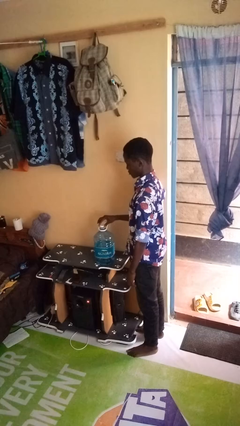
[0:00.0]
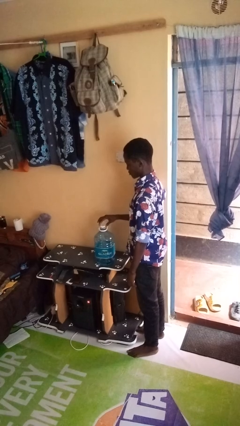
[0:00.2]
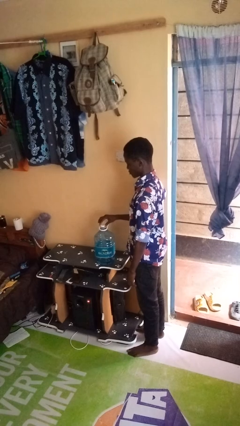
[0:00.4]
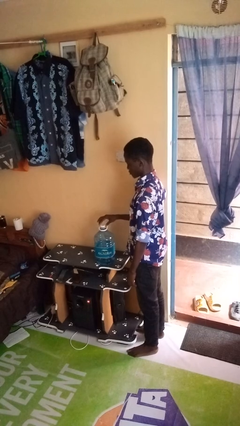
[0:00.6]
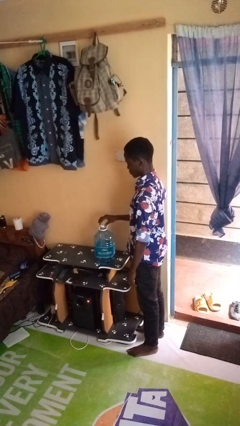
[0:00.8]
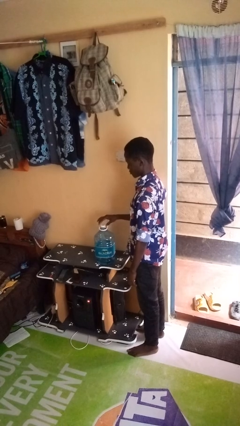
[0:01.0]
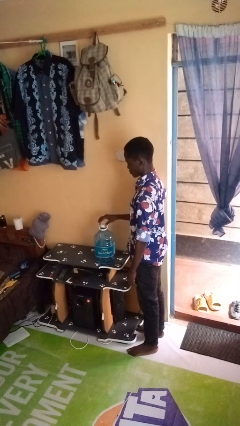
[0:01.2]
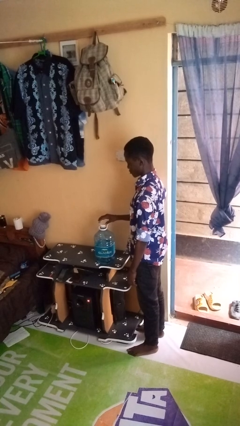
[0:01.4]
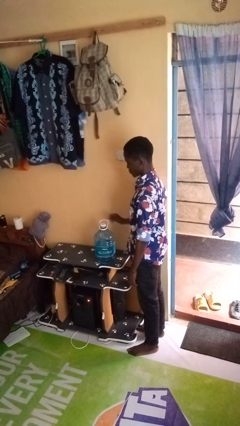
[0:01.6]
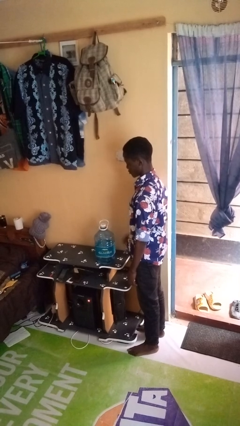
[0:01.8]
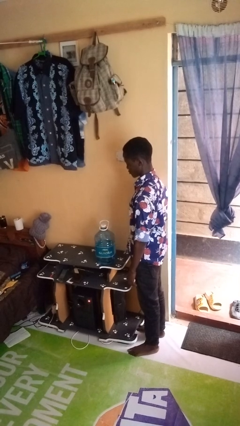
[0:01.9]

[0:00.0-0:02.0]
person screws lid to bottle

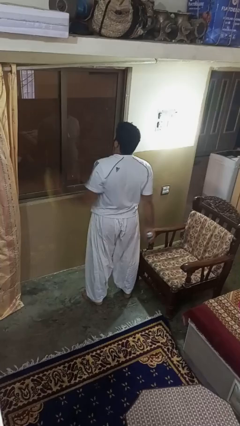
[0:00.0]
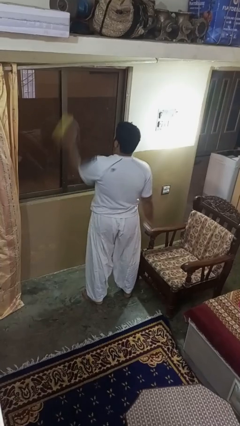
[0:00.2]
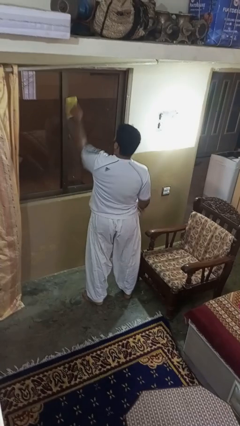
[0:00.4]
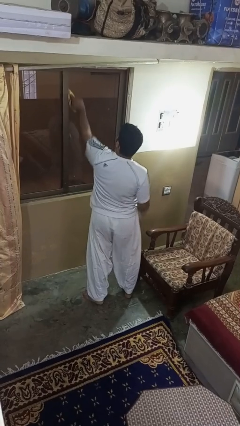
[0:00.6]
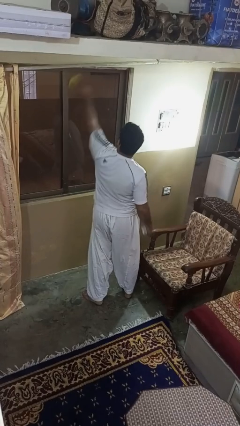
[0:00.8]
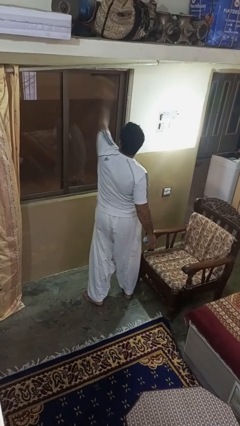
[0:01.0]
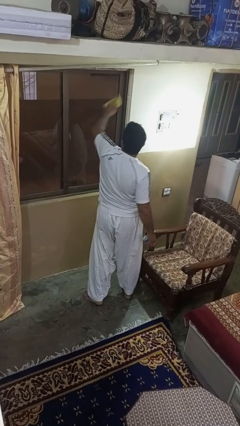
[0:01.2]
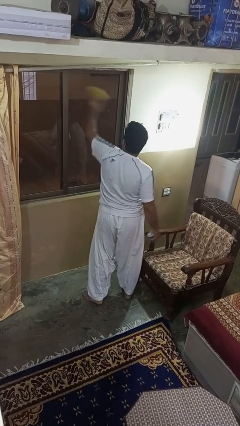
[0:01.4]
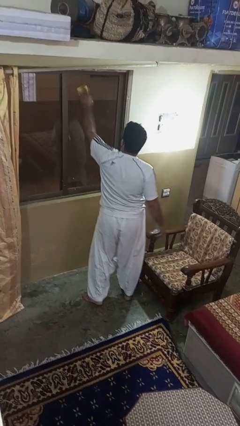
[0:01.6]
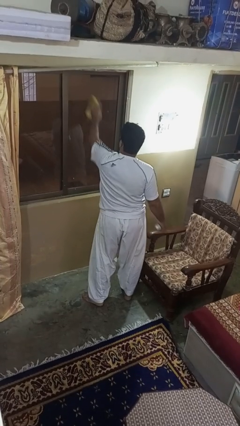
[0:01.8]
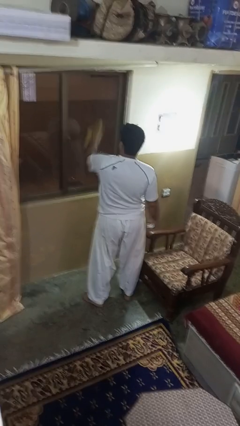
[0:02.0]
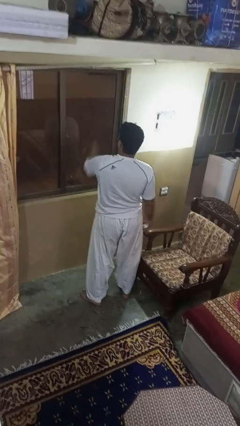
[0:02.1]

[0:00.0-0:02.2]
person washes window

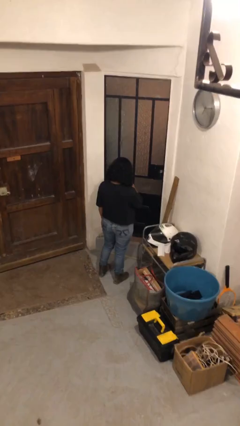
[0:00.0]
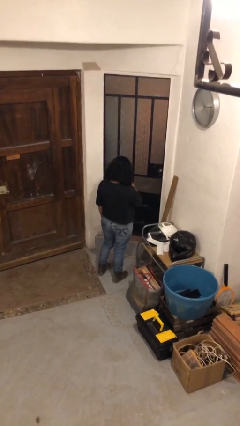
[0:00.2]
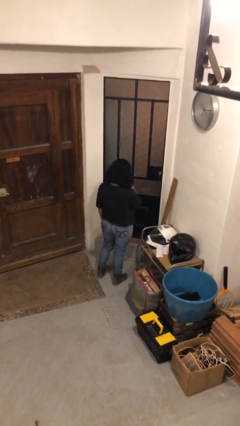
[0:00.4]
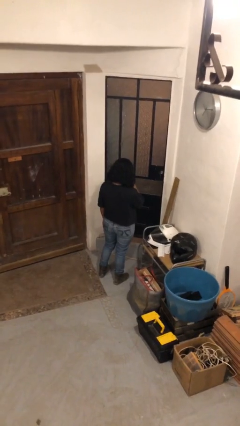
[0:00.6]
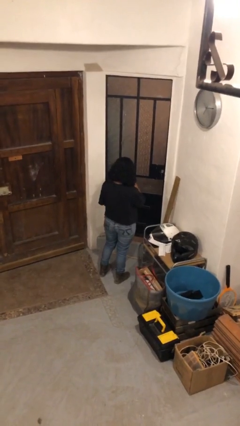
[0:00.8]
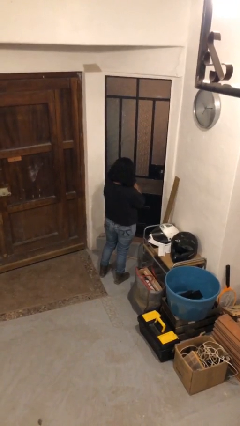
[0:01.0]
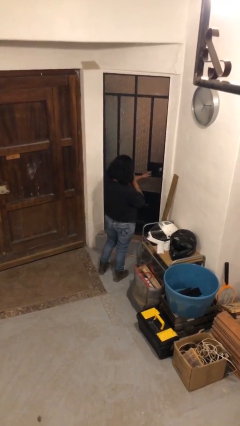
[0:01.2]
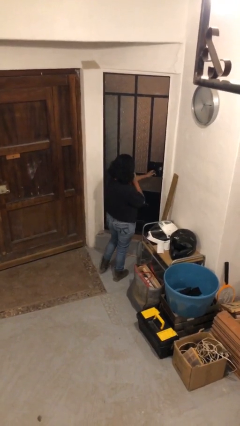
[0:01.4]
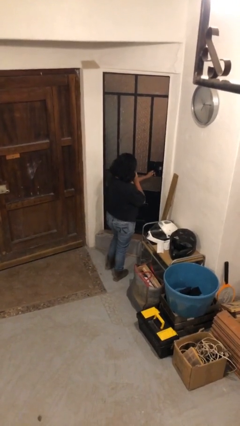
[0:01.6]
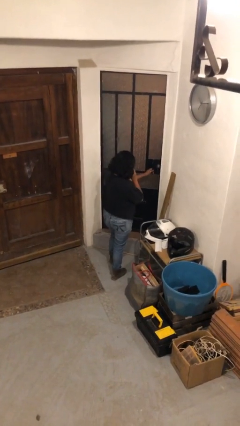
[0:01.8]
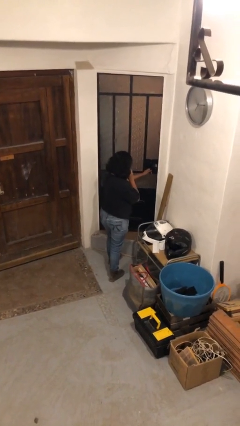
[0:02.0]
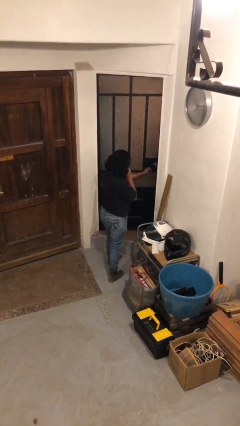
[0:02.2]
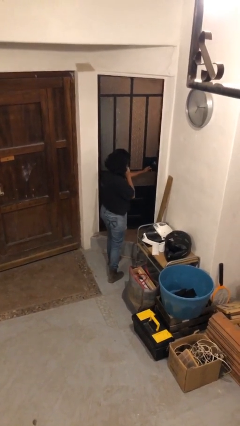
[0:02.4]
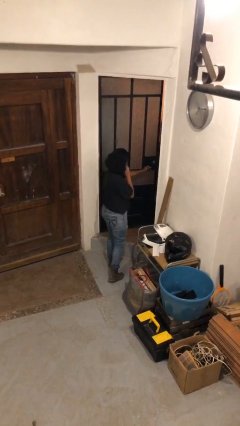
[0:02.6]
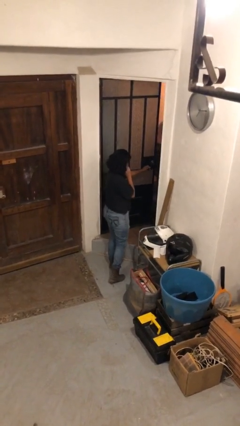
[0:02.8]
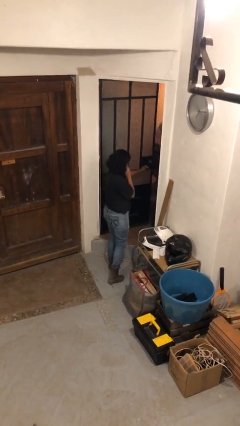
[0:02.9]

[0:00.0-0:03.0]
person opens facility door

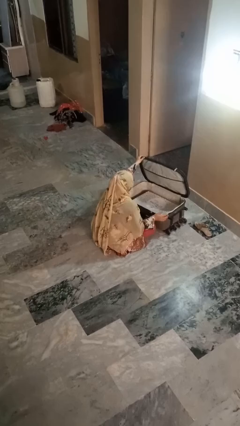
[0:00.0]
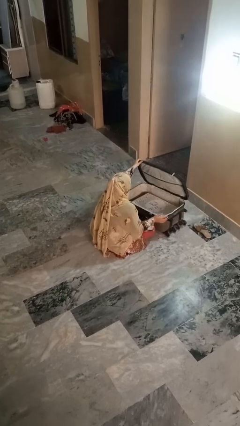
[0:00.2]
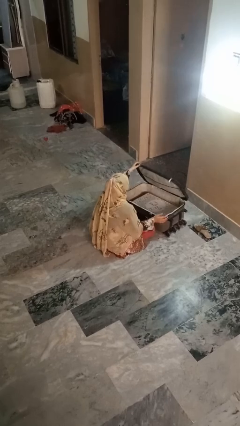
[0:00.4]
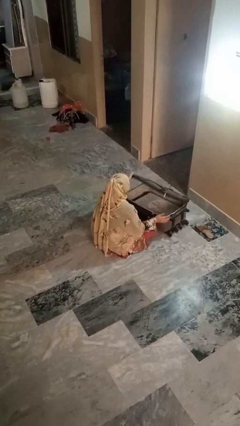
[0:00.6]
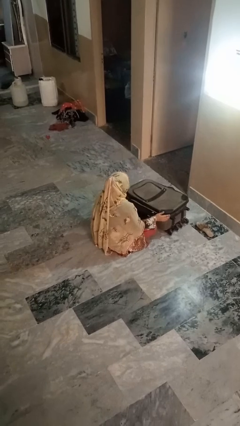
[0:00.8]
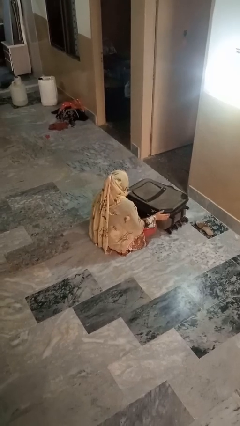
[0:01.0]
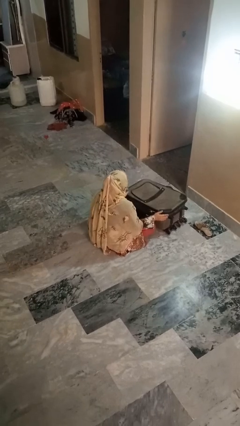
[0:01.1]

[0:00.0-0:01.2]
person closes suitcase

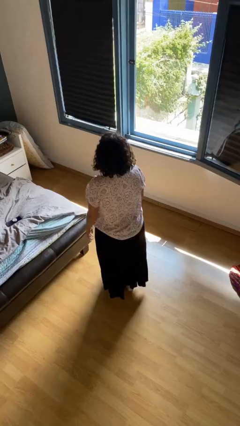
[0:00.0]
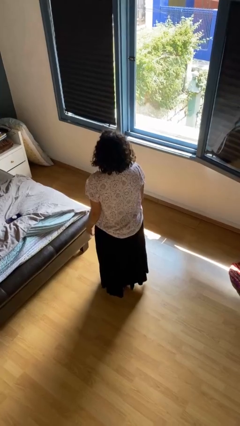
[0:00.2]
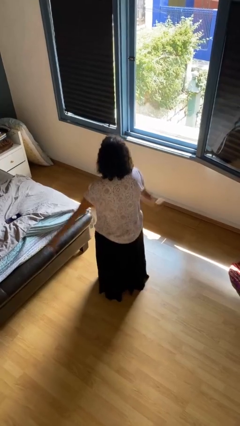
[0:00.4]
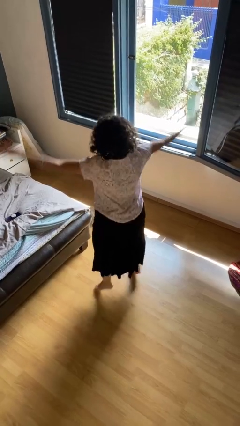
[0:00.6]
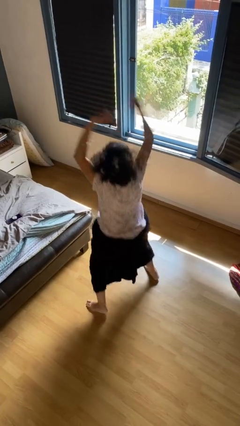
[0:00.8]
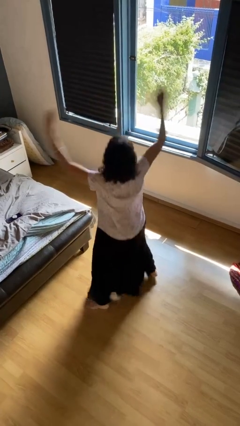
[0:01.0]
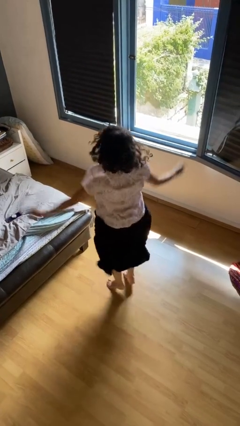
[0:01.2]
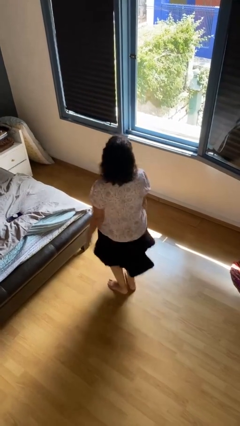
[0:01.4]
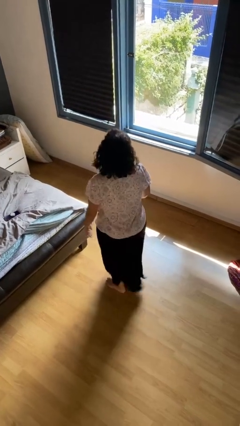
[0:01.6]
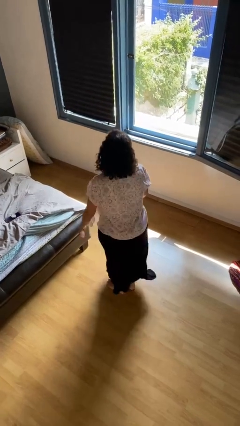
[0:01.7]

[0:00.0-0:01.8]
person exercises with jumping jacks

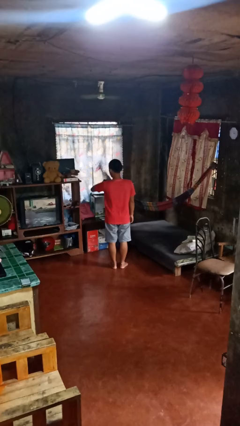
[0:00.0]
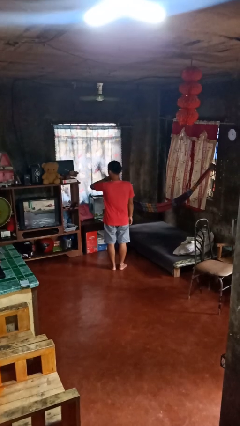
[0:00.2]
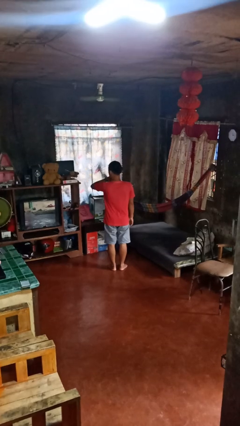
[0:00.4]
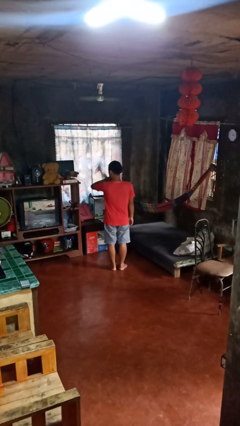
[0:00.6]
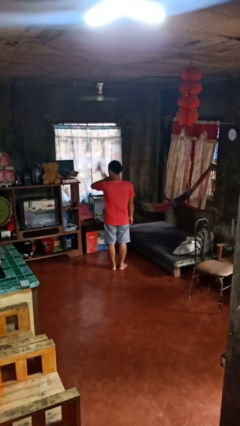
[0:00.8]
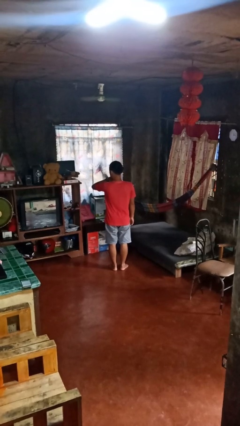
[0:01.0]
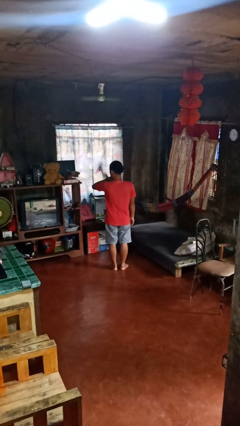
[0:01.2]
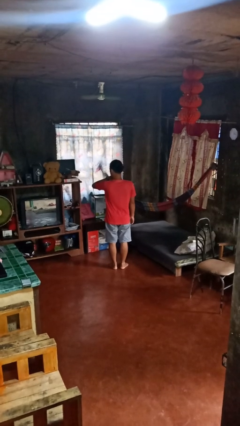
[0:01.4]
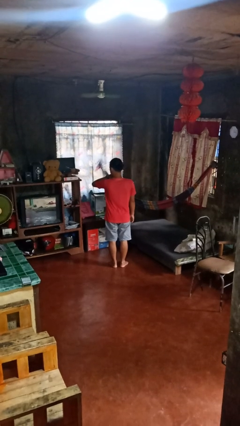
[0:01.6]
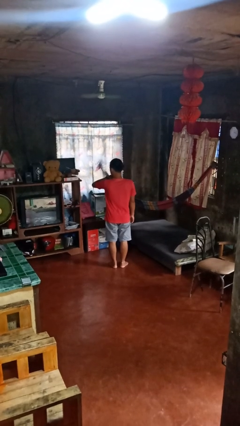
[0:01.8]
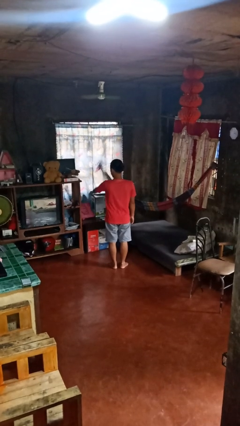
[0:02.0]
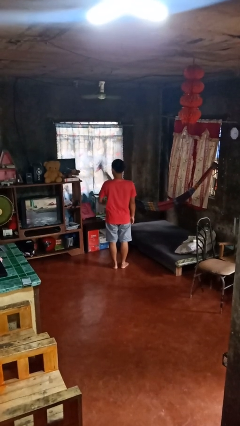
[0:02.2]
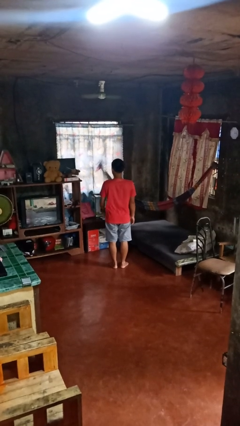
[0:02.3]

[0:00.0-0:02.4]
person looks at wristwatch

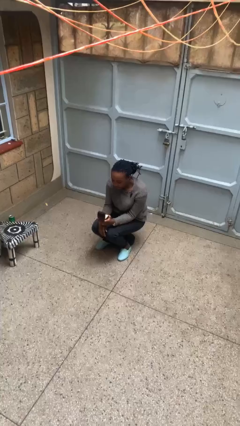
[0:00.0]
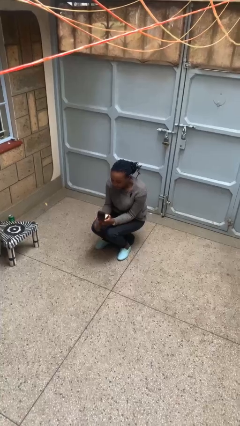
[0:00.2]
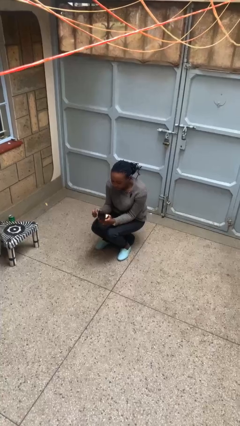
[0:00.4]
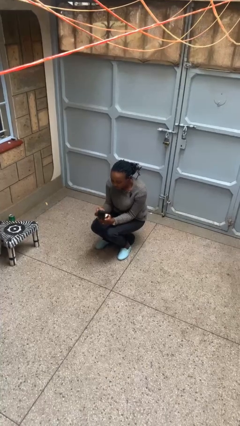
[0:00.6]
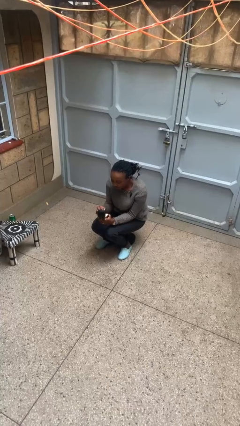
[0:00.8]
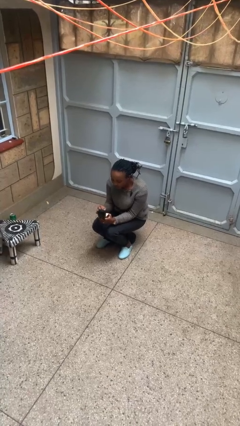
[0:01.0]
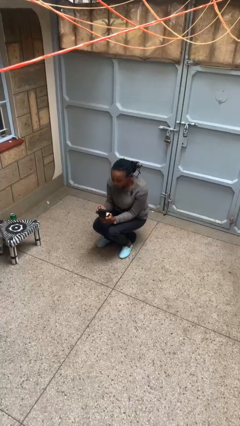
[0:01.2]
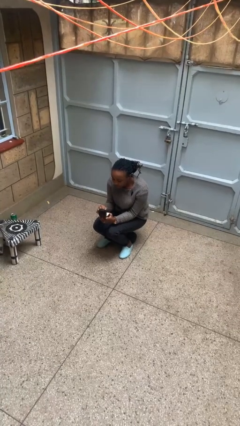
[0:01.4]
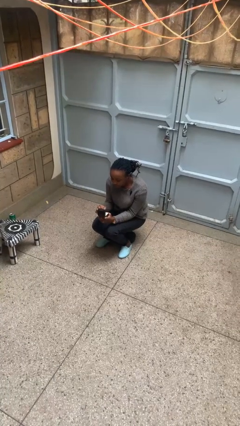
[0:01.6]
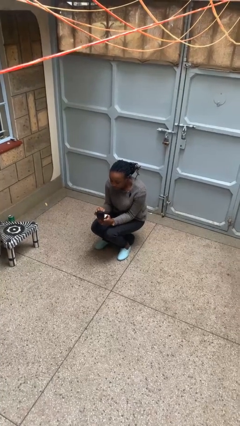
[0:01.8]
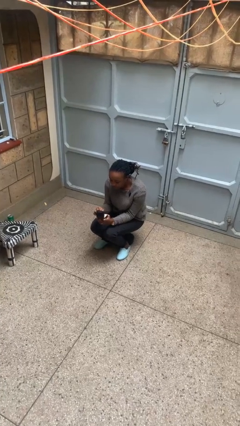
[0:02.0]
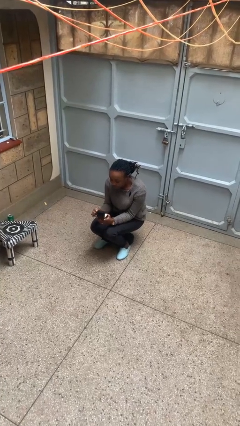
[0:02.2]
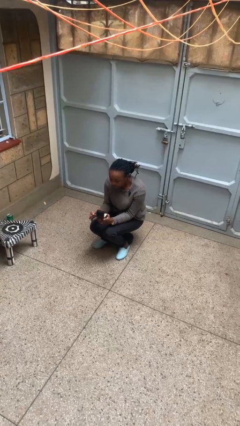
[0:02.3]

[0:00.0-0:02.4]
person searches jewelry box

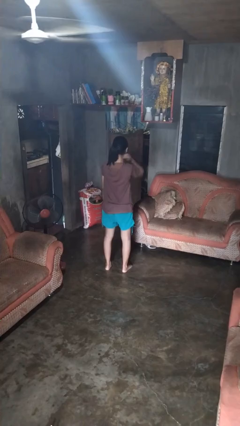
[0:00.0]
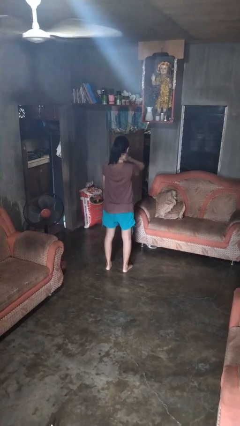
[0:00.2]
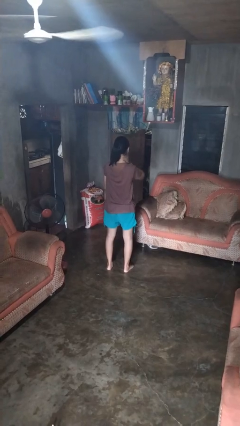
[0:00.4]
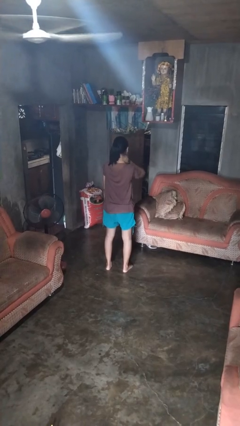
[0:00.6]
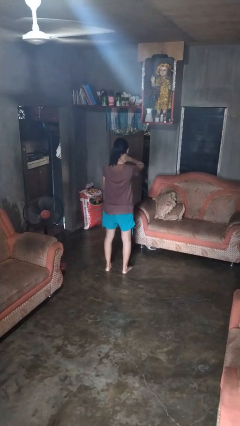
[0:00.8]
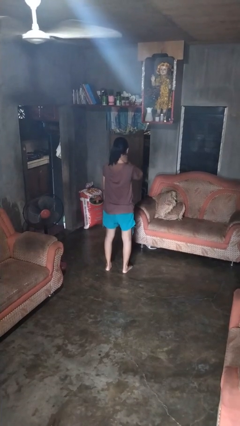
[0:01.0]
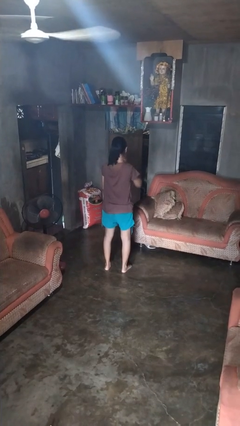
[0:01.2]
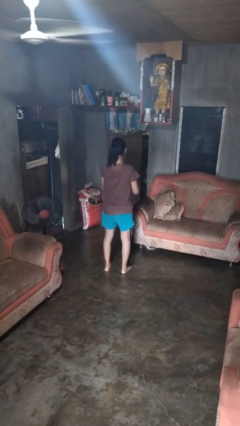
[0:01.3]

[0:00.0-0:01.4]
person rubs neck

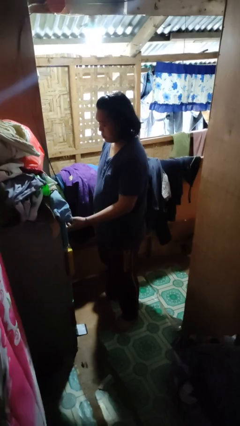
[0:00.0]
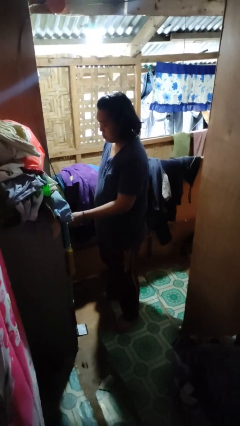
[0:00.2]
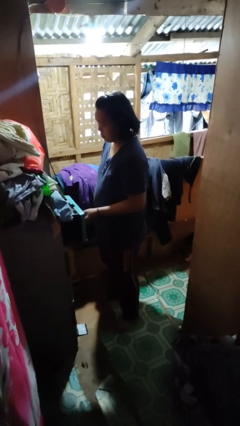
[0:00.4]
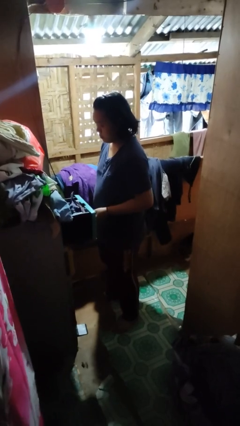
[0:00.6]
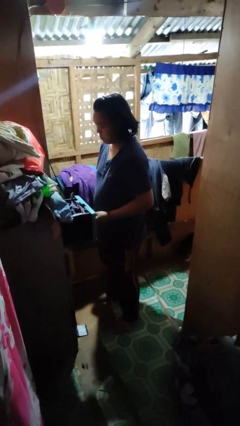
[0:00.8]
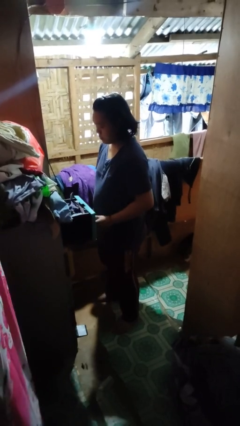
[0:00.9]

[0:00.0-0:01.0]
person opens dresser drawer
